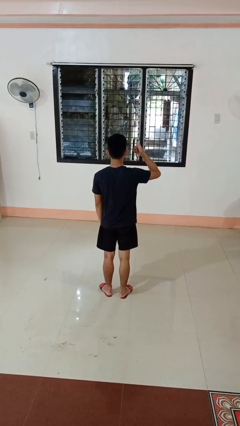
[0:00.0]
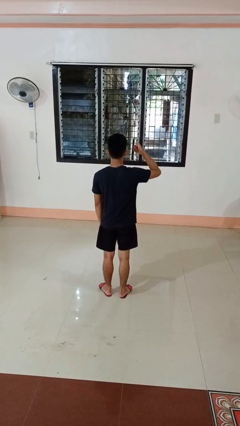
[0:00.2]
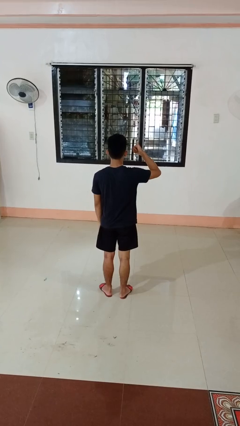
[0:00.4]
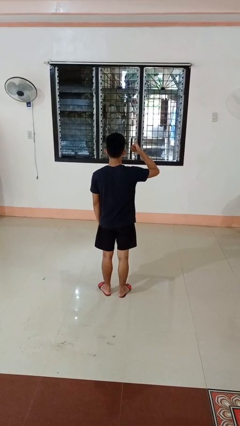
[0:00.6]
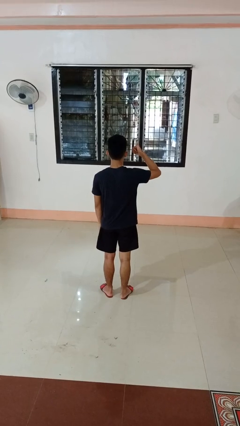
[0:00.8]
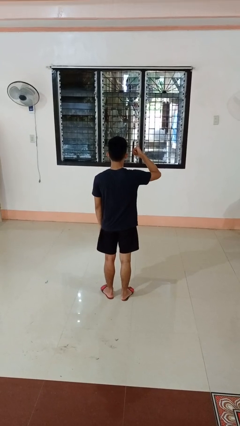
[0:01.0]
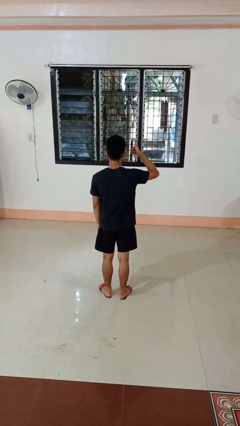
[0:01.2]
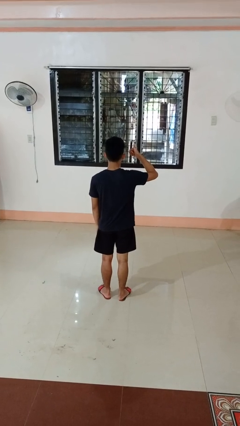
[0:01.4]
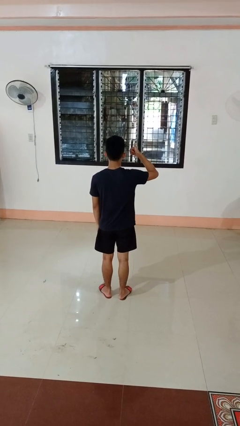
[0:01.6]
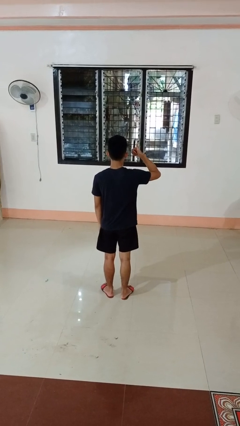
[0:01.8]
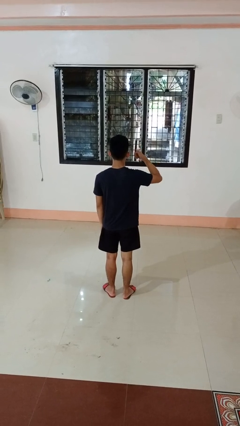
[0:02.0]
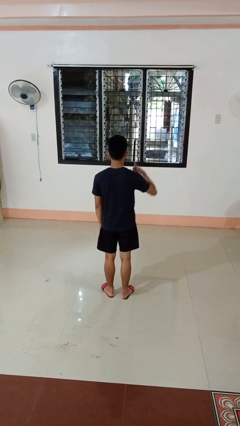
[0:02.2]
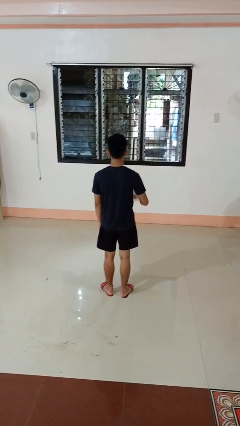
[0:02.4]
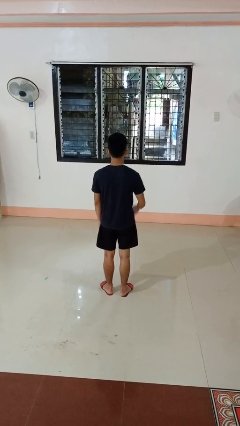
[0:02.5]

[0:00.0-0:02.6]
person gestures thumbs up

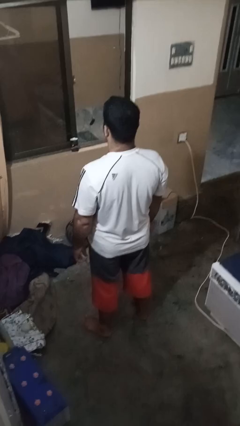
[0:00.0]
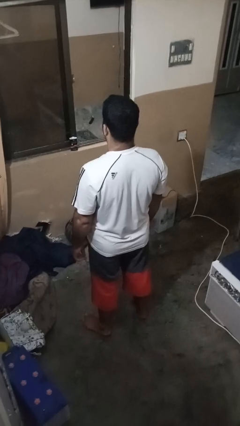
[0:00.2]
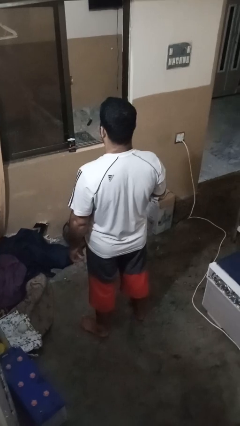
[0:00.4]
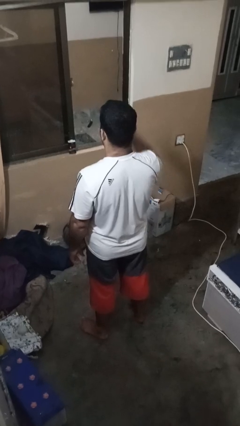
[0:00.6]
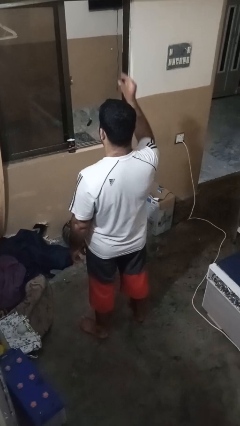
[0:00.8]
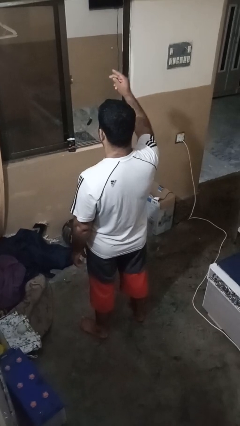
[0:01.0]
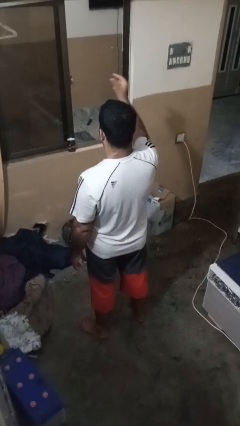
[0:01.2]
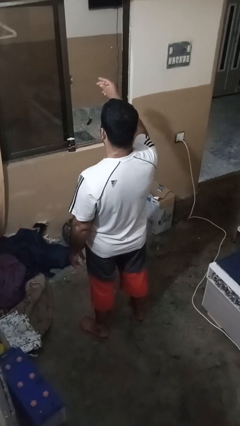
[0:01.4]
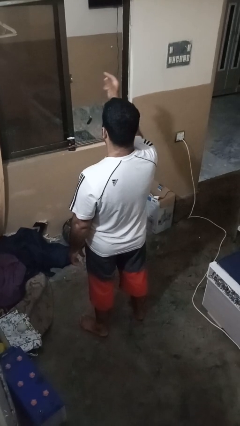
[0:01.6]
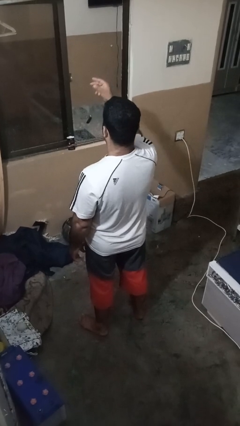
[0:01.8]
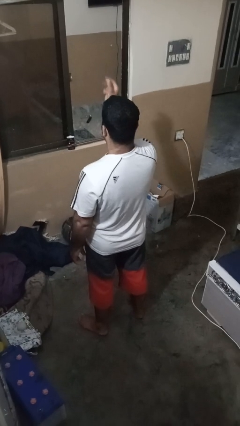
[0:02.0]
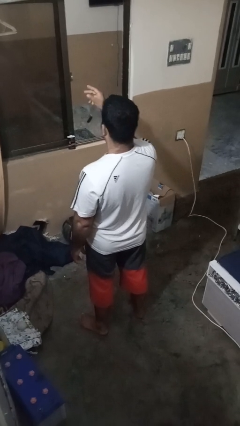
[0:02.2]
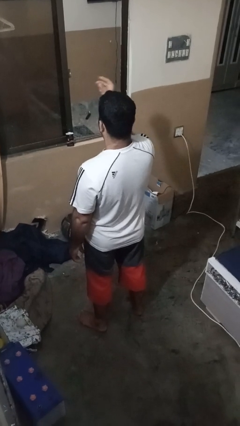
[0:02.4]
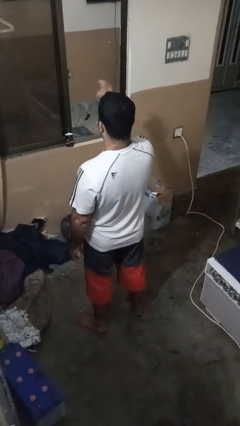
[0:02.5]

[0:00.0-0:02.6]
person snaps fingers

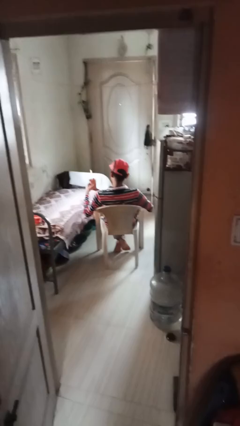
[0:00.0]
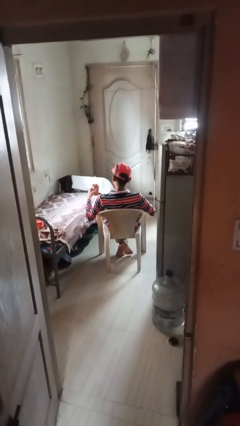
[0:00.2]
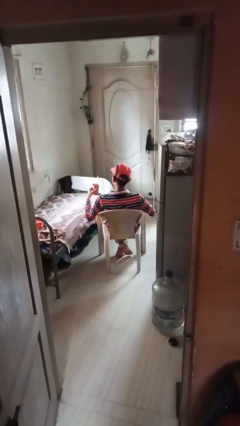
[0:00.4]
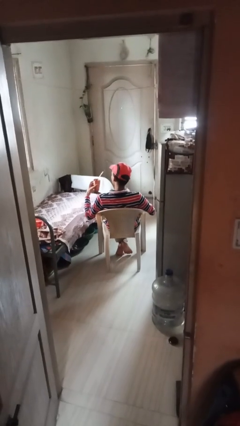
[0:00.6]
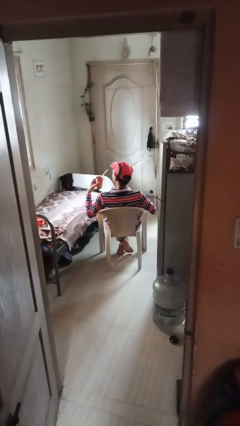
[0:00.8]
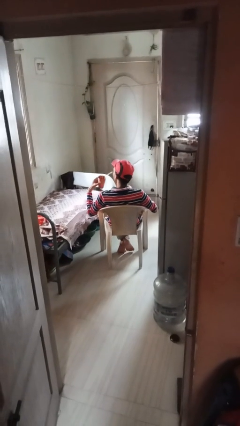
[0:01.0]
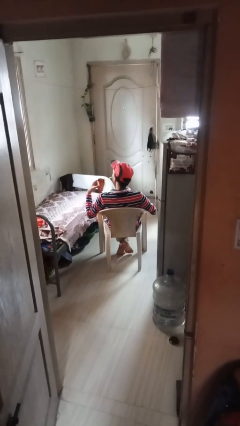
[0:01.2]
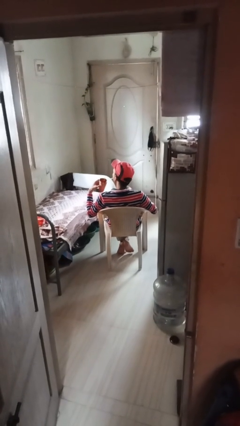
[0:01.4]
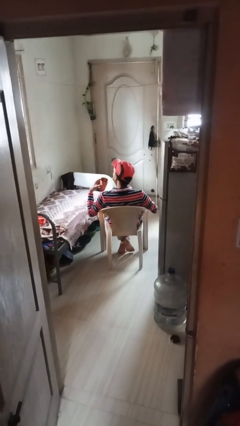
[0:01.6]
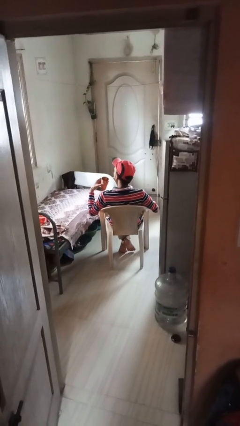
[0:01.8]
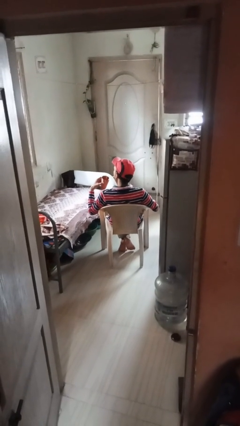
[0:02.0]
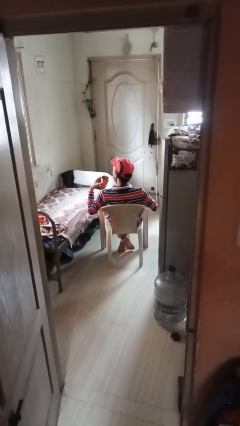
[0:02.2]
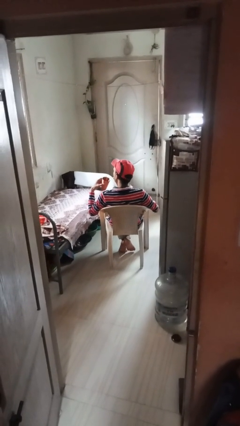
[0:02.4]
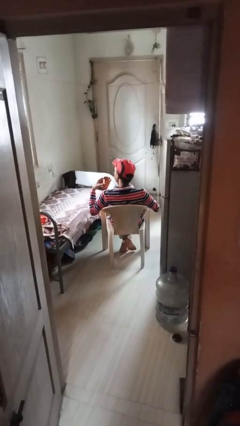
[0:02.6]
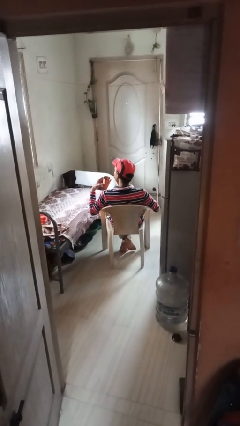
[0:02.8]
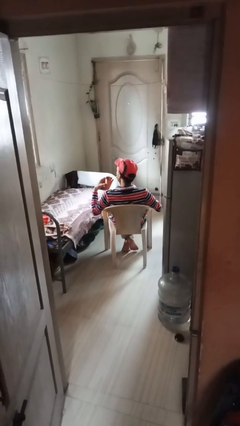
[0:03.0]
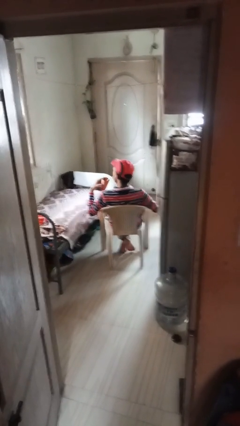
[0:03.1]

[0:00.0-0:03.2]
person drinks from straw

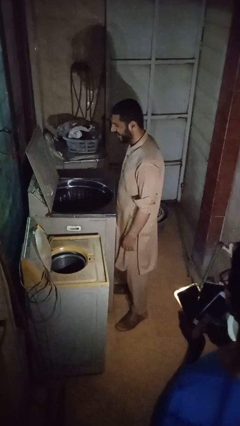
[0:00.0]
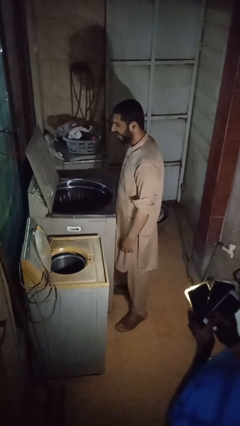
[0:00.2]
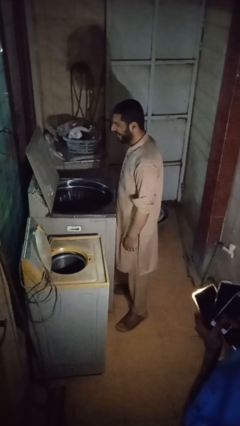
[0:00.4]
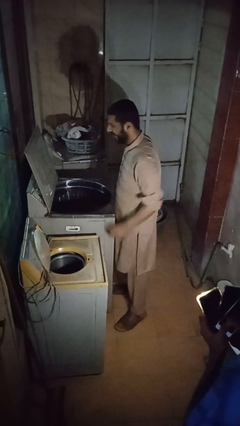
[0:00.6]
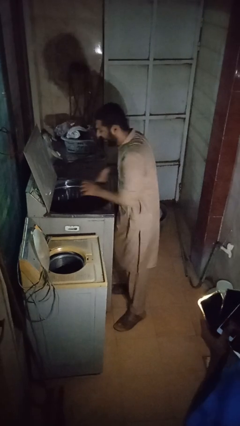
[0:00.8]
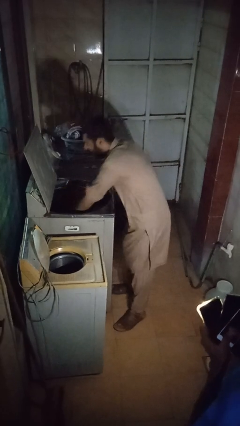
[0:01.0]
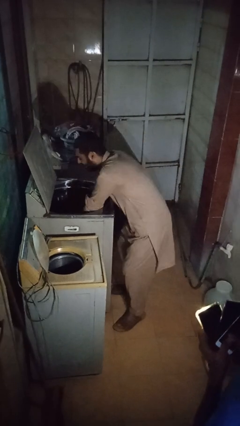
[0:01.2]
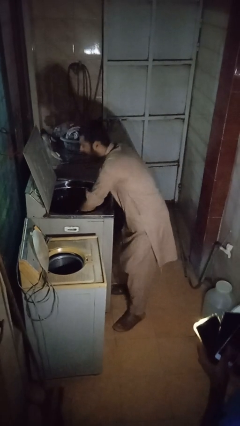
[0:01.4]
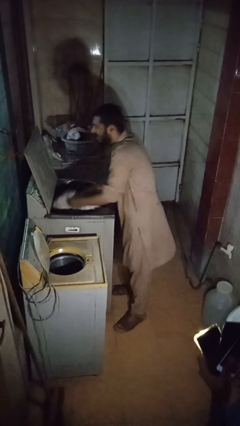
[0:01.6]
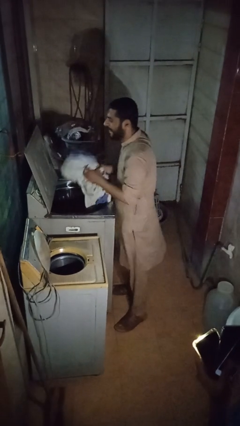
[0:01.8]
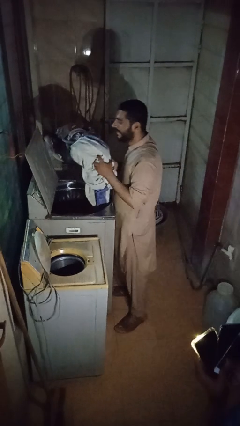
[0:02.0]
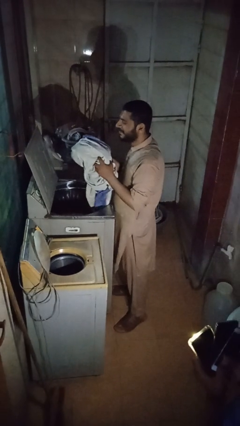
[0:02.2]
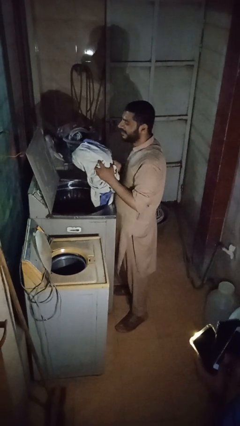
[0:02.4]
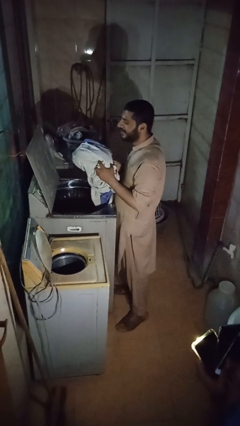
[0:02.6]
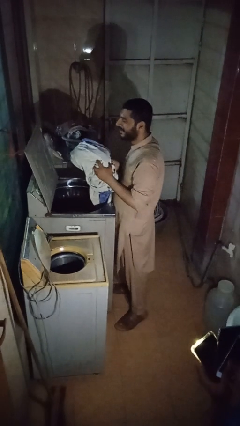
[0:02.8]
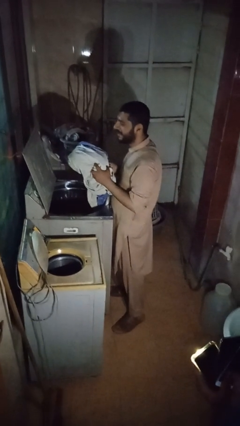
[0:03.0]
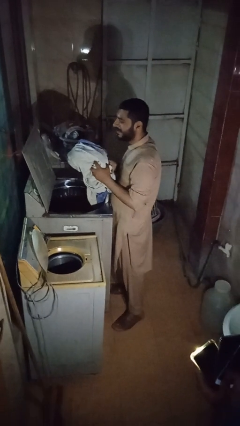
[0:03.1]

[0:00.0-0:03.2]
person unloads clotheswasher

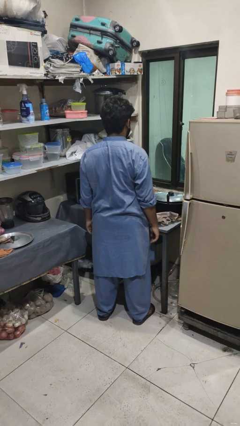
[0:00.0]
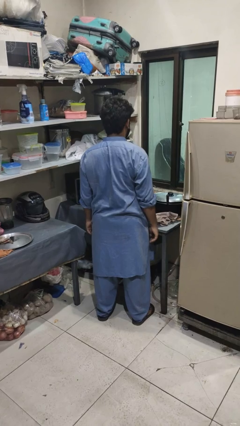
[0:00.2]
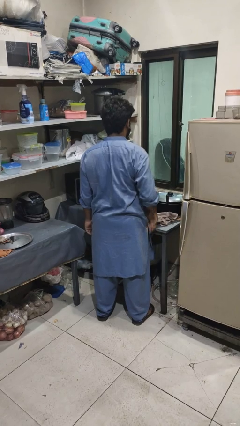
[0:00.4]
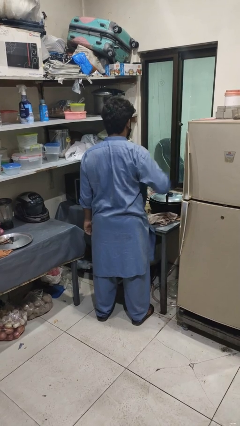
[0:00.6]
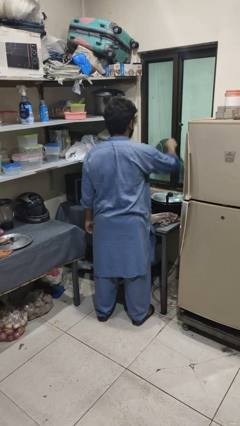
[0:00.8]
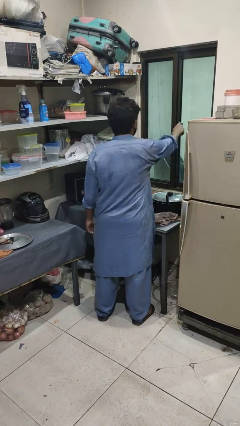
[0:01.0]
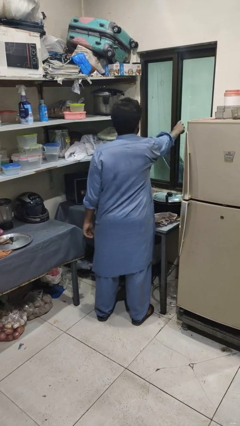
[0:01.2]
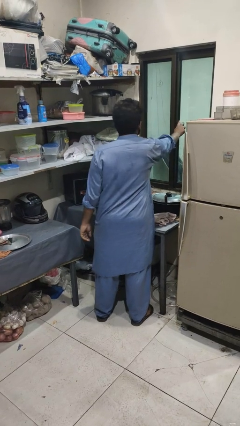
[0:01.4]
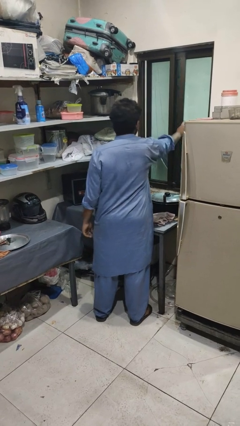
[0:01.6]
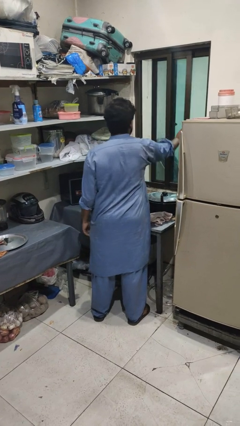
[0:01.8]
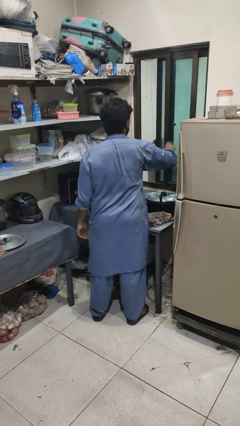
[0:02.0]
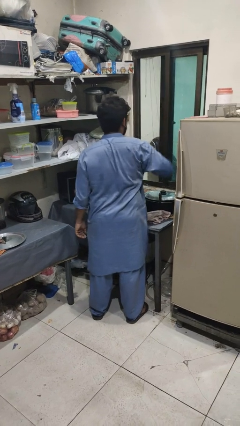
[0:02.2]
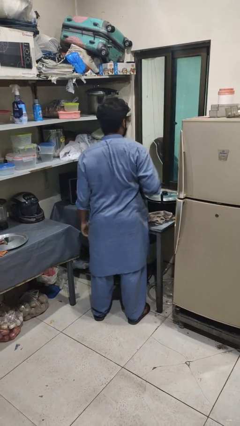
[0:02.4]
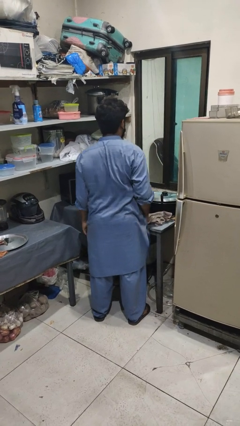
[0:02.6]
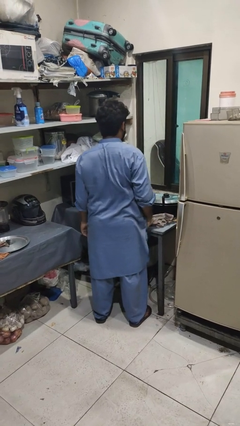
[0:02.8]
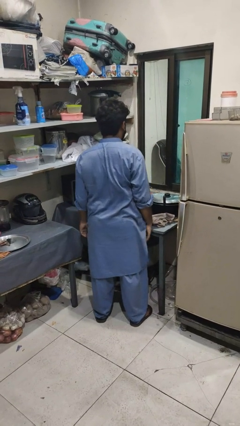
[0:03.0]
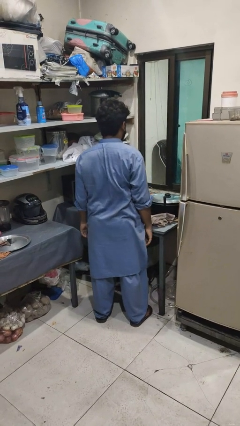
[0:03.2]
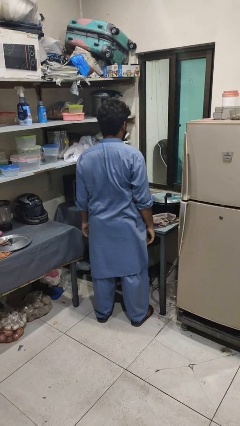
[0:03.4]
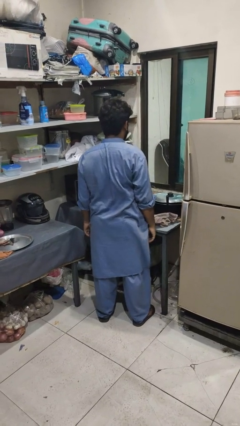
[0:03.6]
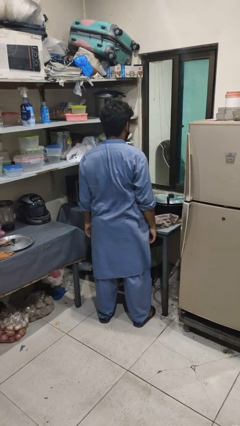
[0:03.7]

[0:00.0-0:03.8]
person opens home window

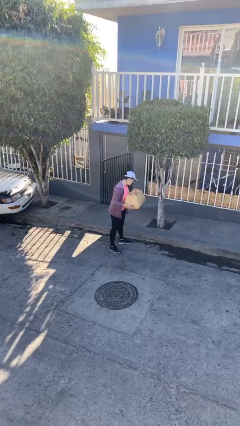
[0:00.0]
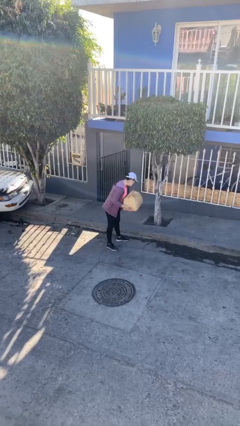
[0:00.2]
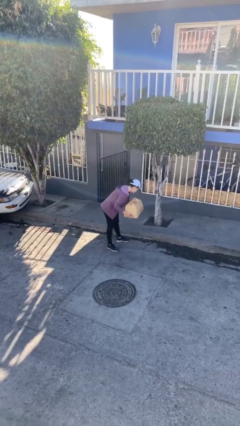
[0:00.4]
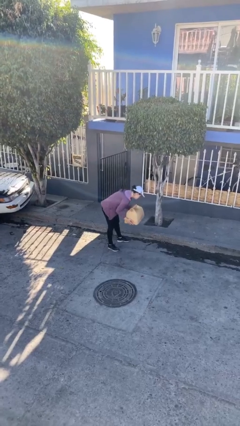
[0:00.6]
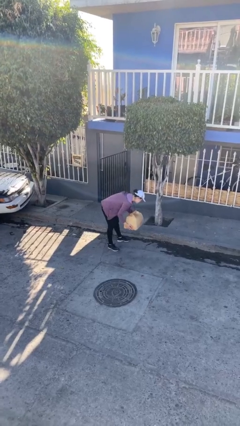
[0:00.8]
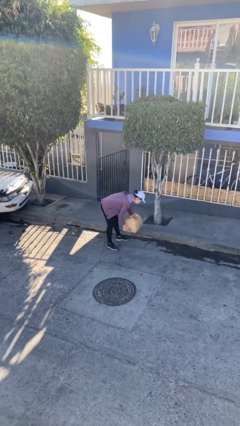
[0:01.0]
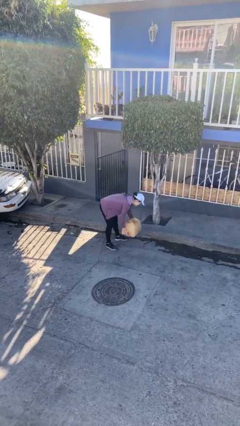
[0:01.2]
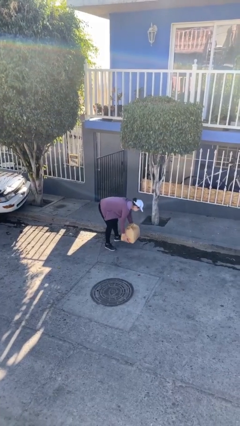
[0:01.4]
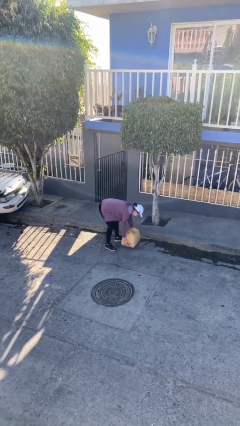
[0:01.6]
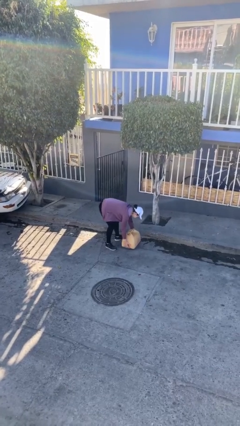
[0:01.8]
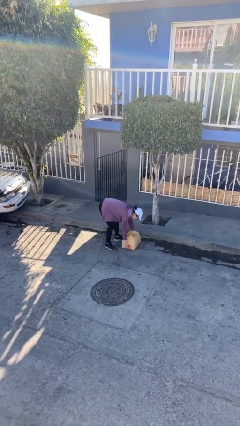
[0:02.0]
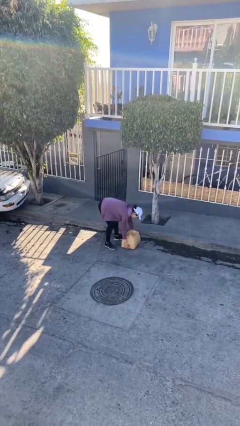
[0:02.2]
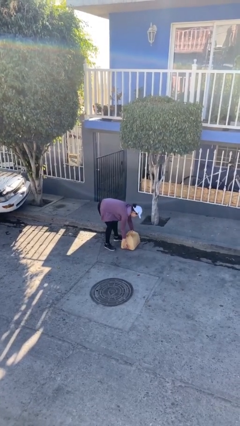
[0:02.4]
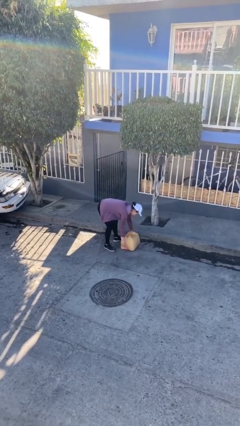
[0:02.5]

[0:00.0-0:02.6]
person puts down object on floor
